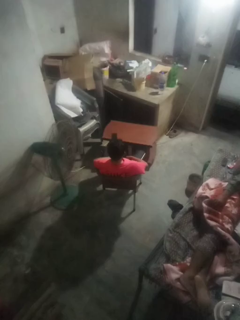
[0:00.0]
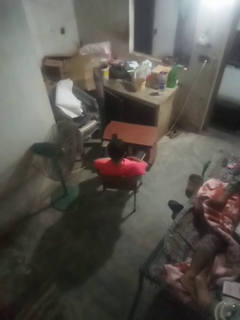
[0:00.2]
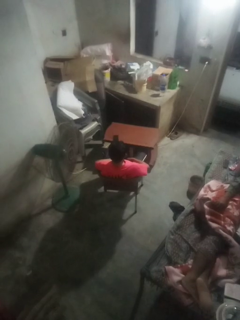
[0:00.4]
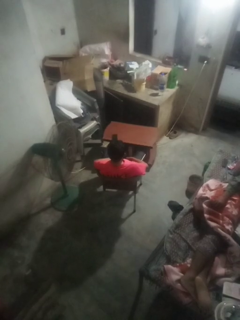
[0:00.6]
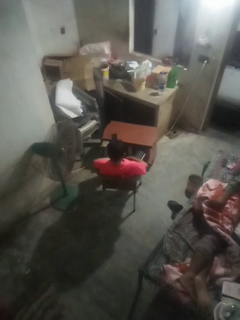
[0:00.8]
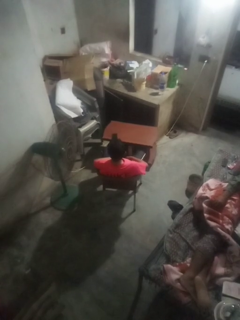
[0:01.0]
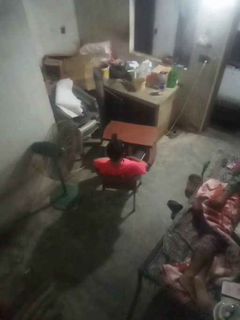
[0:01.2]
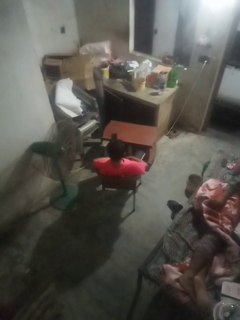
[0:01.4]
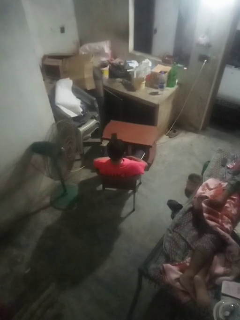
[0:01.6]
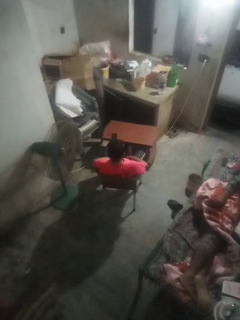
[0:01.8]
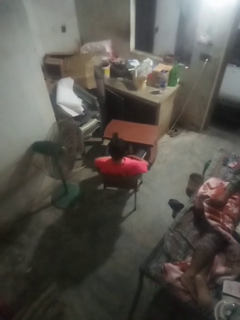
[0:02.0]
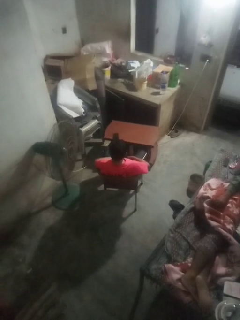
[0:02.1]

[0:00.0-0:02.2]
person shakes head

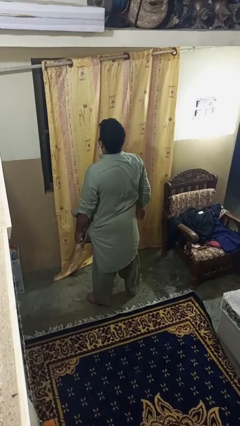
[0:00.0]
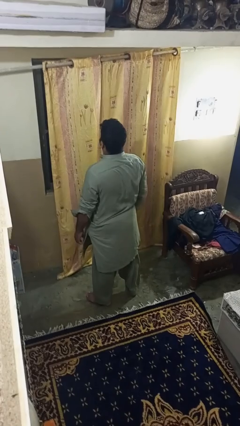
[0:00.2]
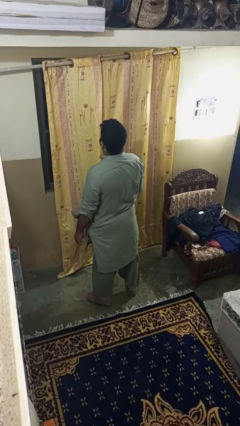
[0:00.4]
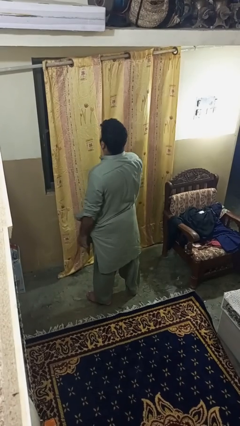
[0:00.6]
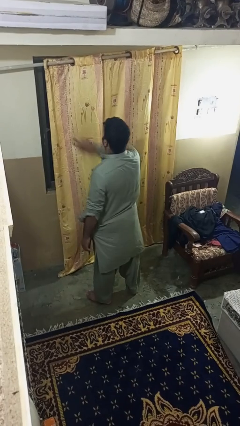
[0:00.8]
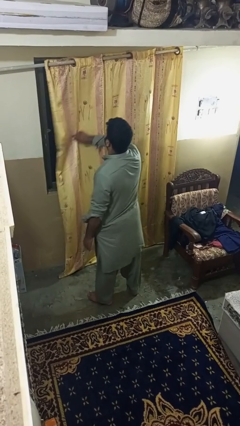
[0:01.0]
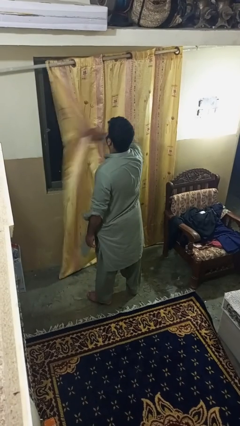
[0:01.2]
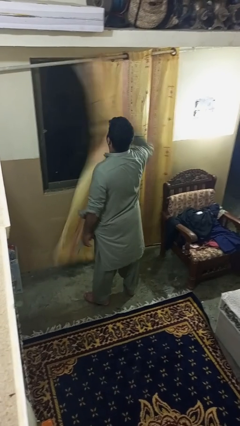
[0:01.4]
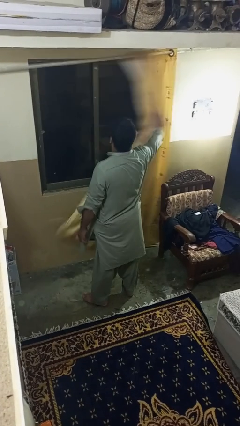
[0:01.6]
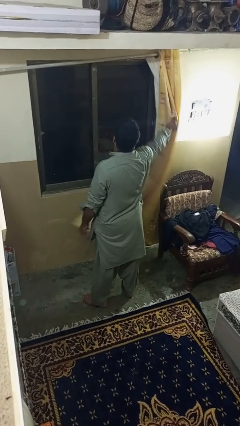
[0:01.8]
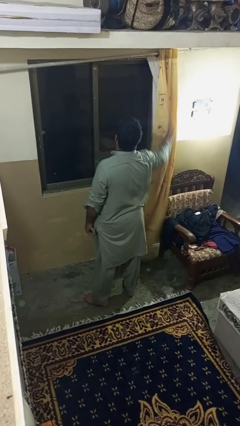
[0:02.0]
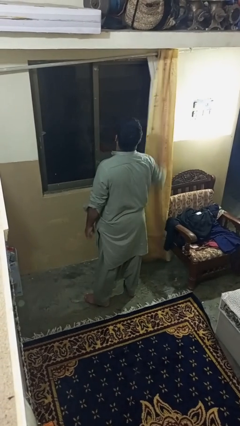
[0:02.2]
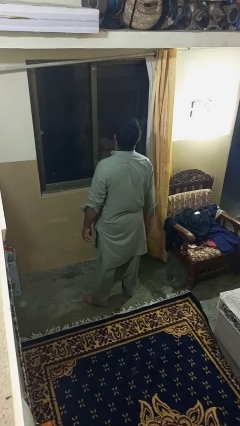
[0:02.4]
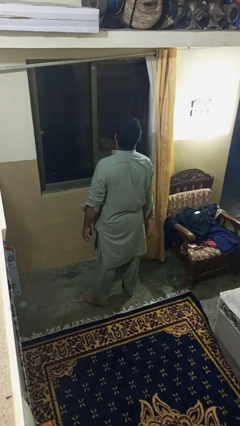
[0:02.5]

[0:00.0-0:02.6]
person opens curtains

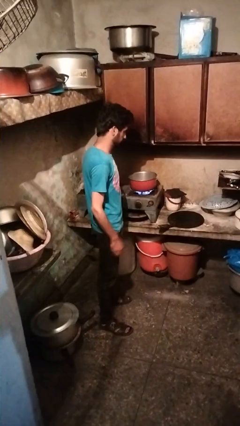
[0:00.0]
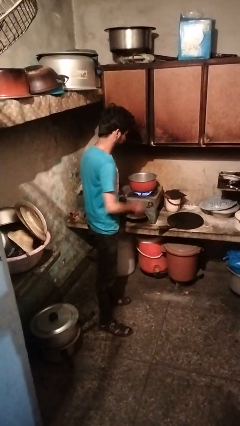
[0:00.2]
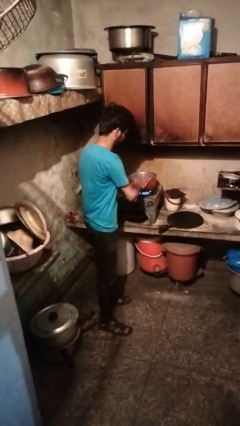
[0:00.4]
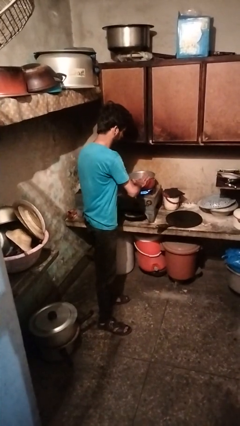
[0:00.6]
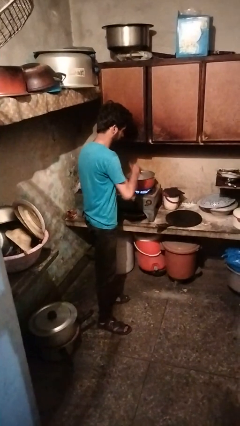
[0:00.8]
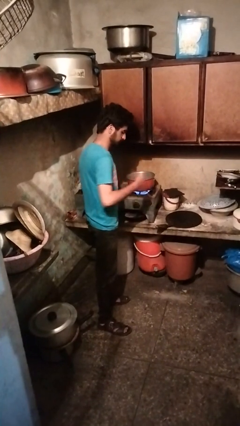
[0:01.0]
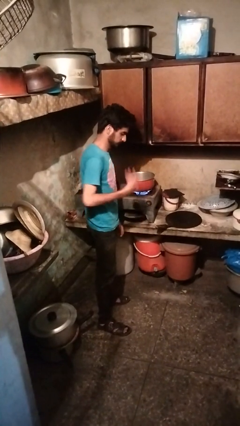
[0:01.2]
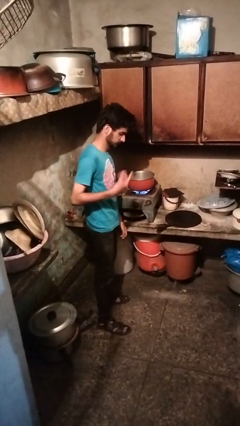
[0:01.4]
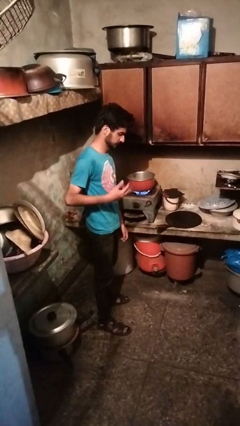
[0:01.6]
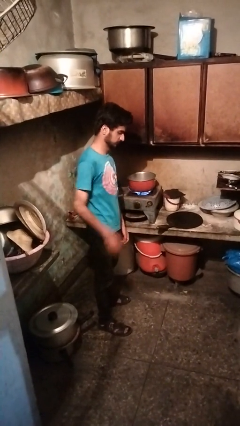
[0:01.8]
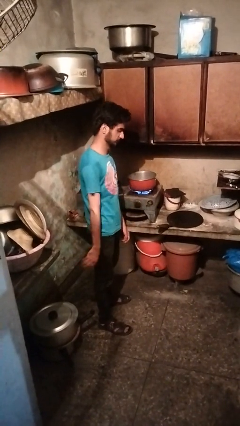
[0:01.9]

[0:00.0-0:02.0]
person burns hand

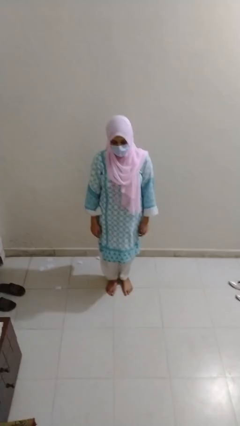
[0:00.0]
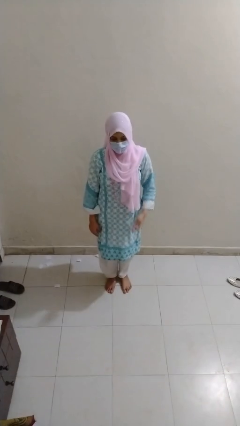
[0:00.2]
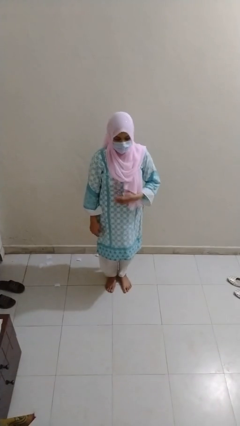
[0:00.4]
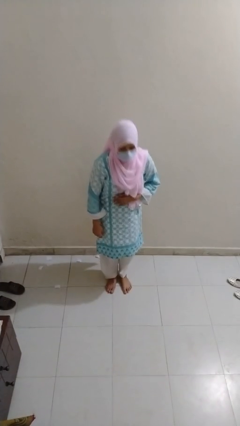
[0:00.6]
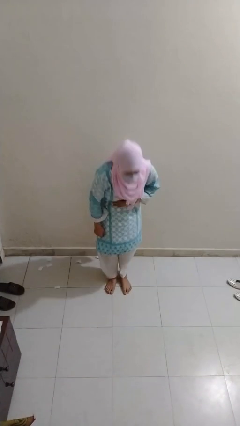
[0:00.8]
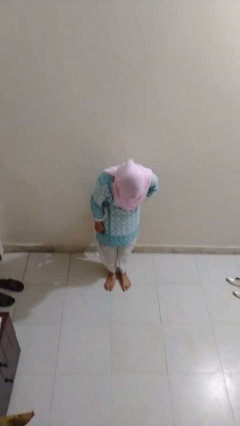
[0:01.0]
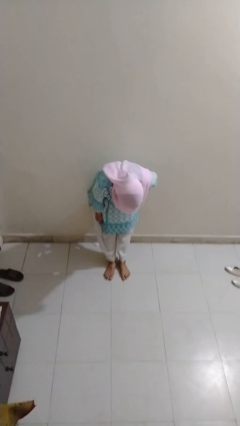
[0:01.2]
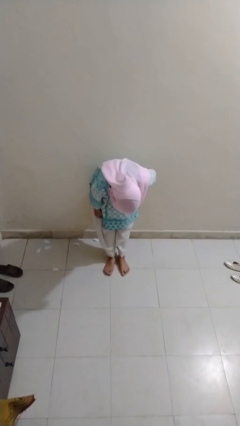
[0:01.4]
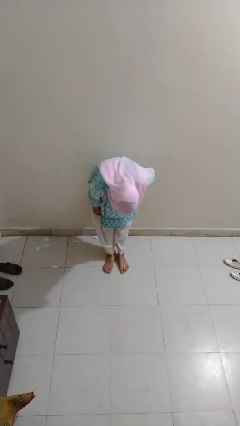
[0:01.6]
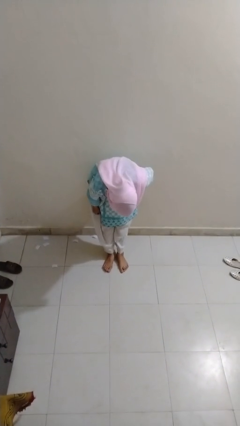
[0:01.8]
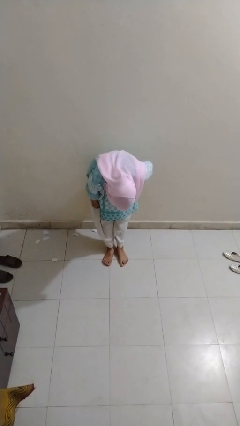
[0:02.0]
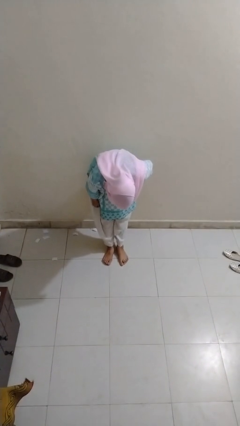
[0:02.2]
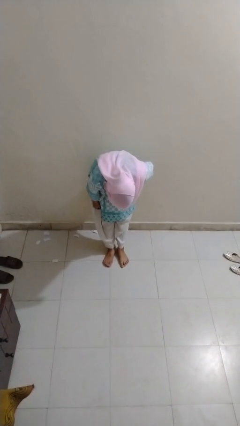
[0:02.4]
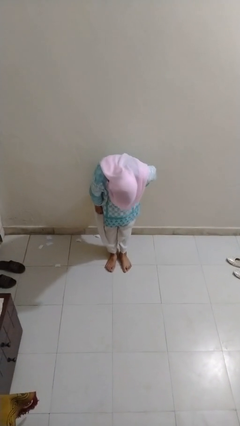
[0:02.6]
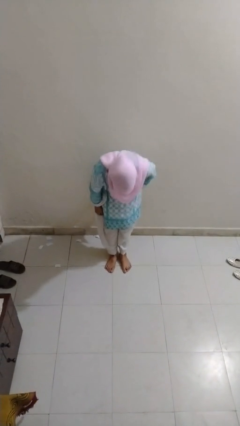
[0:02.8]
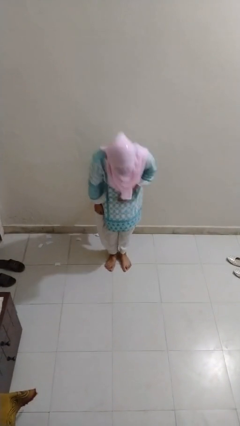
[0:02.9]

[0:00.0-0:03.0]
person bows

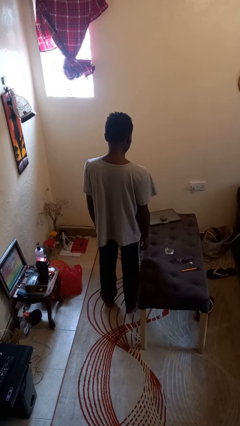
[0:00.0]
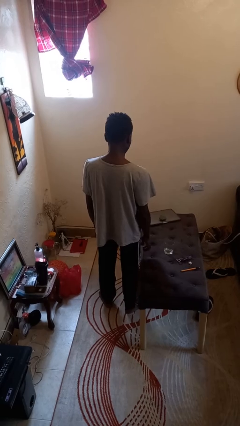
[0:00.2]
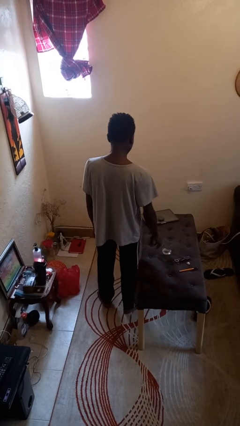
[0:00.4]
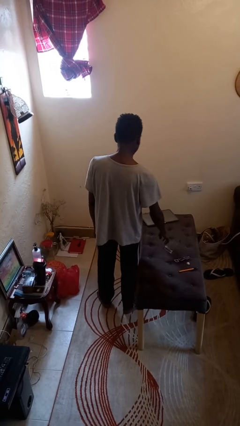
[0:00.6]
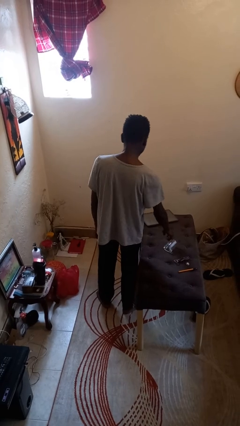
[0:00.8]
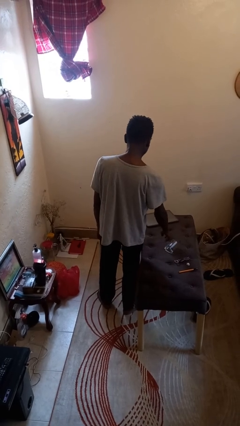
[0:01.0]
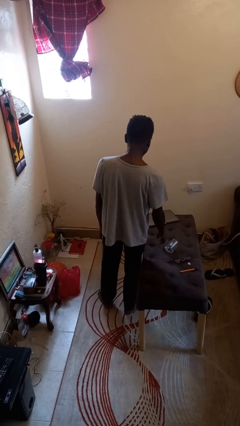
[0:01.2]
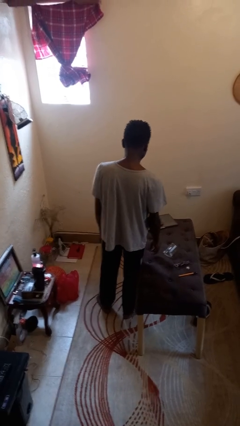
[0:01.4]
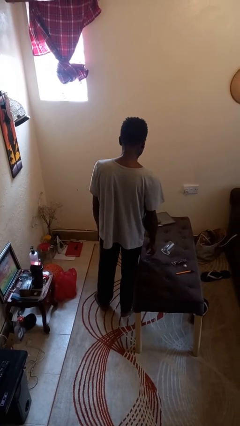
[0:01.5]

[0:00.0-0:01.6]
person knocks over glass

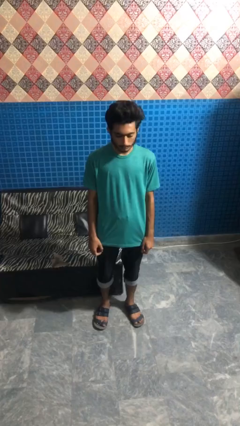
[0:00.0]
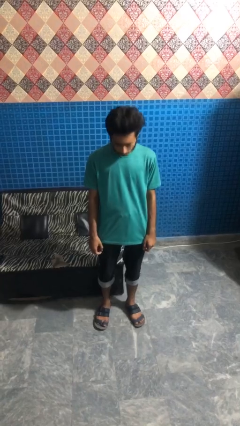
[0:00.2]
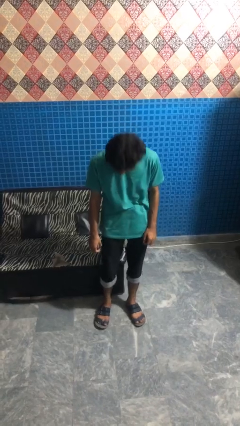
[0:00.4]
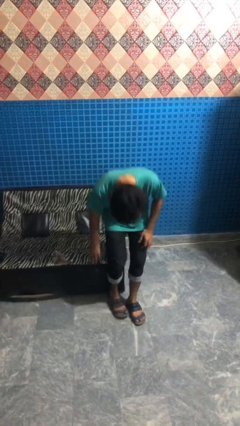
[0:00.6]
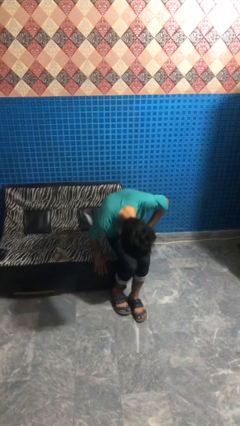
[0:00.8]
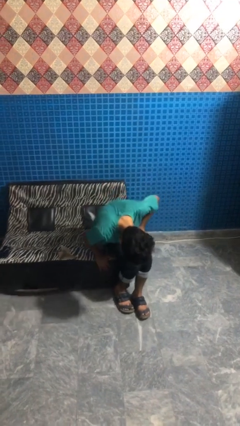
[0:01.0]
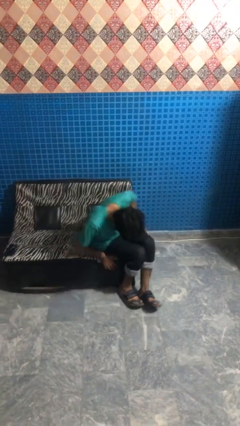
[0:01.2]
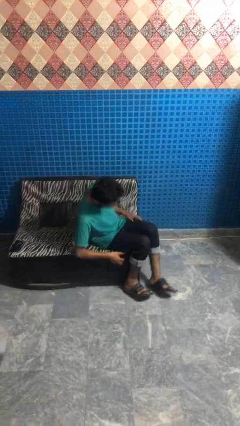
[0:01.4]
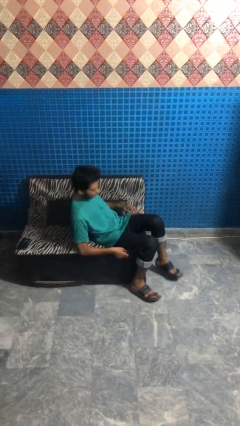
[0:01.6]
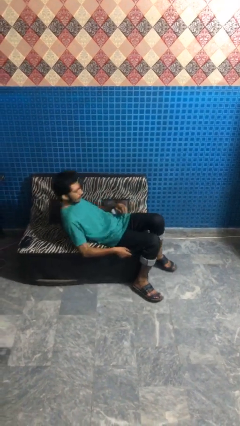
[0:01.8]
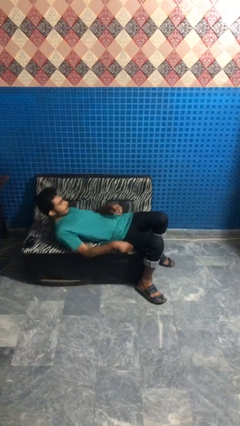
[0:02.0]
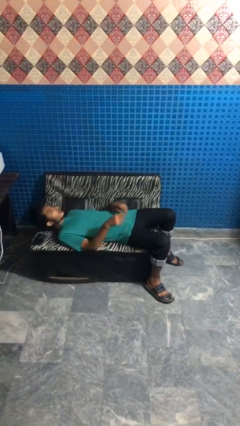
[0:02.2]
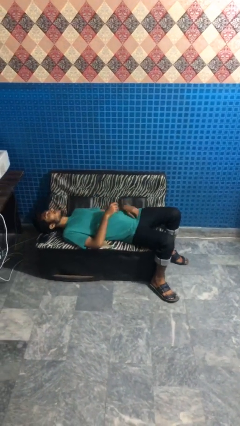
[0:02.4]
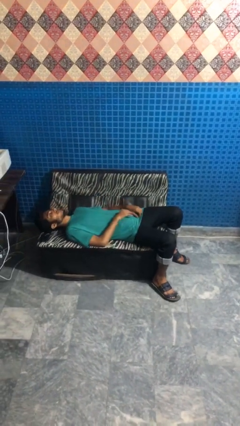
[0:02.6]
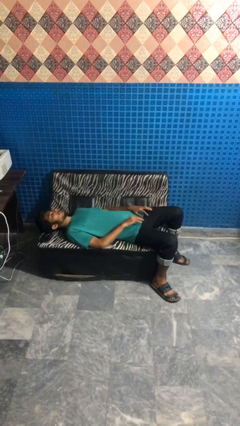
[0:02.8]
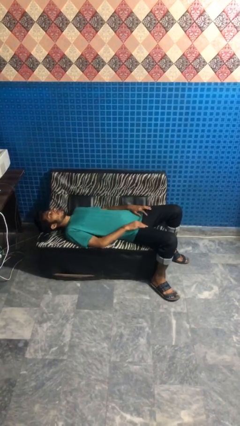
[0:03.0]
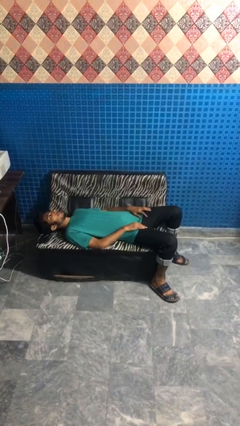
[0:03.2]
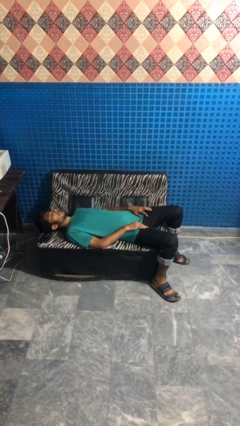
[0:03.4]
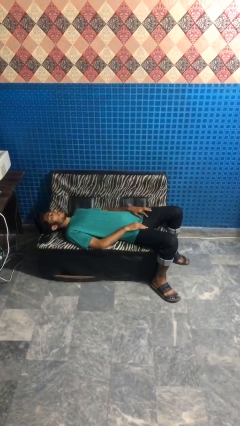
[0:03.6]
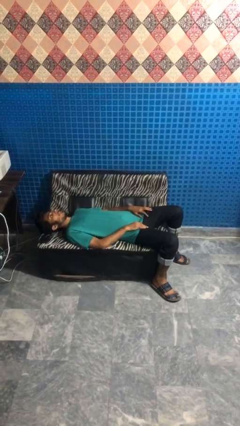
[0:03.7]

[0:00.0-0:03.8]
person lies down on couch

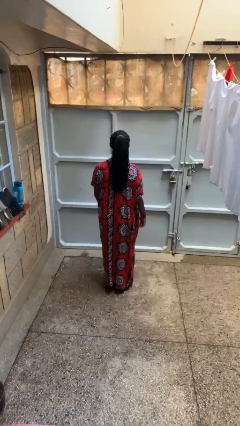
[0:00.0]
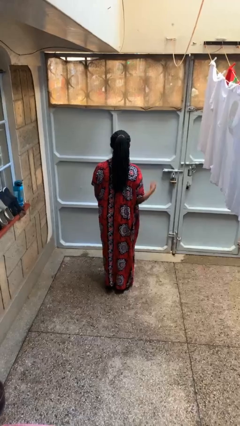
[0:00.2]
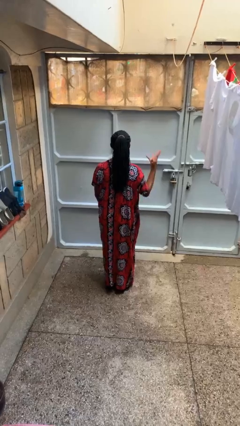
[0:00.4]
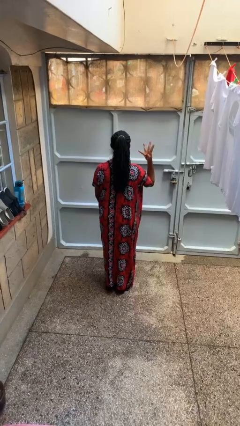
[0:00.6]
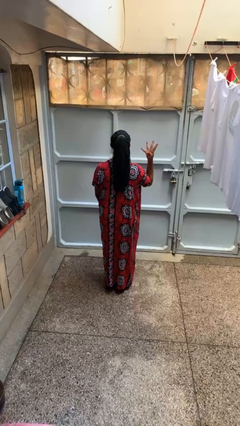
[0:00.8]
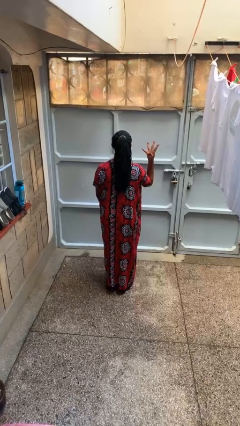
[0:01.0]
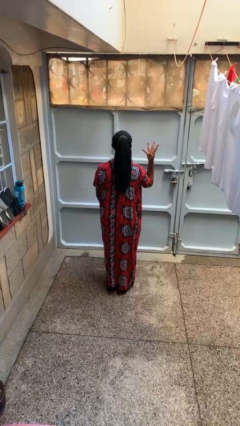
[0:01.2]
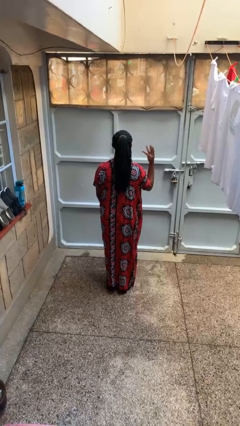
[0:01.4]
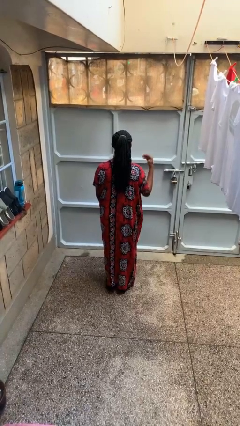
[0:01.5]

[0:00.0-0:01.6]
person gestures number four

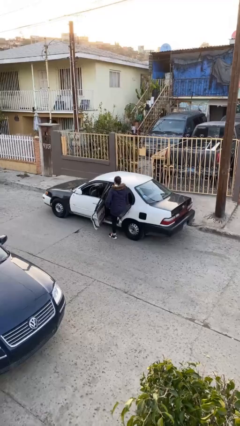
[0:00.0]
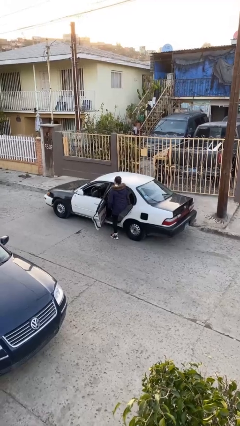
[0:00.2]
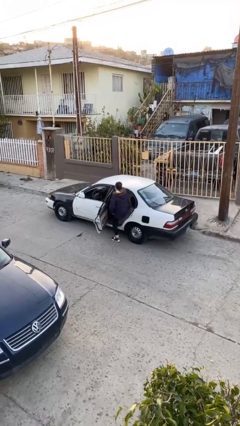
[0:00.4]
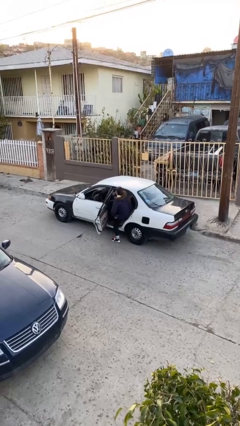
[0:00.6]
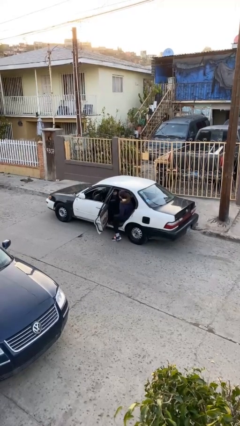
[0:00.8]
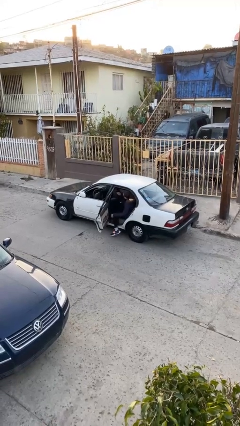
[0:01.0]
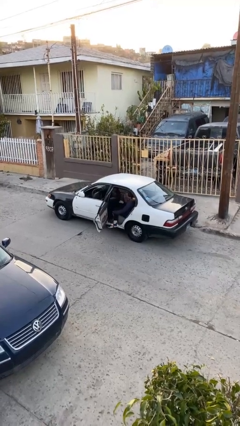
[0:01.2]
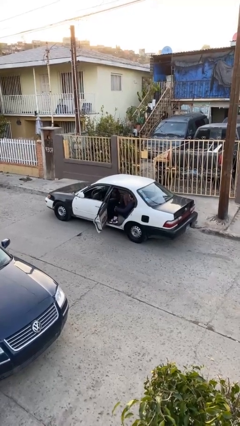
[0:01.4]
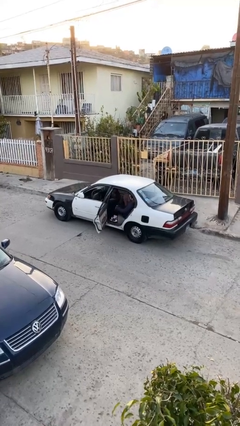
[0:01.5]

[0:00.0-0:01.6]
person enters car
